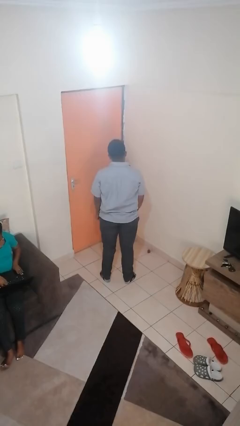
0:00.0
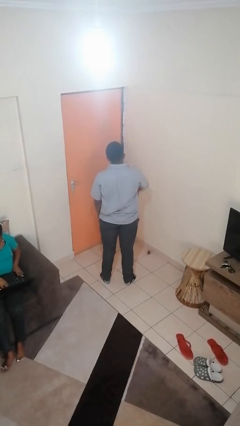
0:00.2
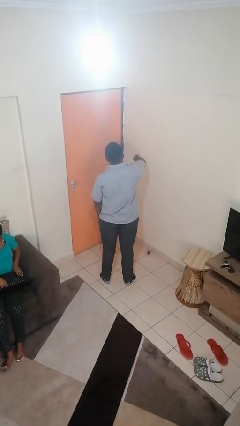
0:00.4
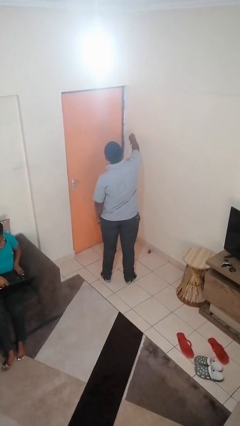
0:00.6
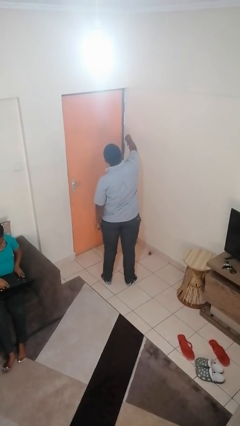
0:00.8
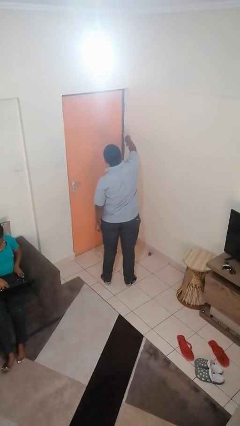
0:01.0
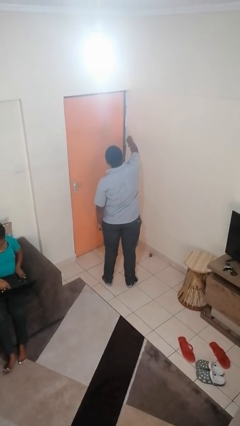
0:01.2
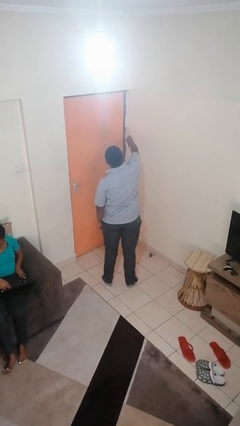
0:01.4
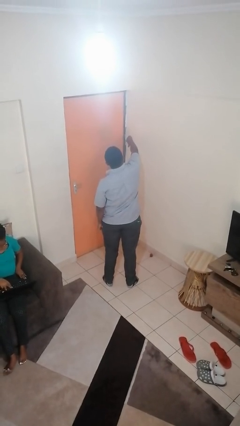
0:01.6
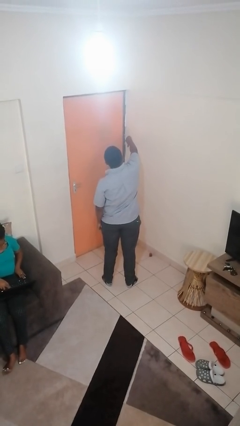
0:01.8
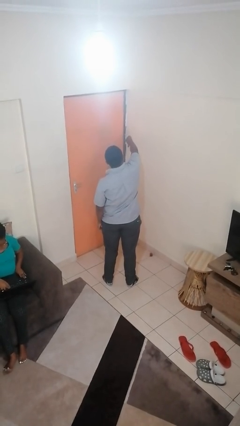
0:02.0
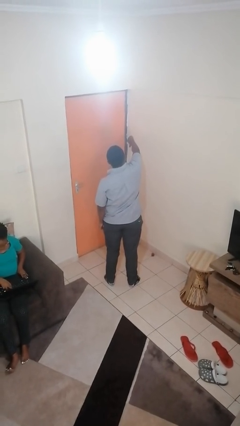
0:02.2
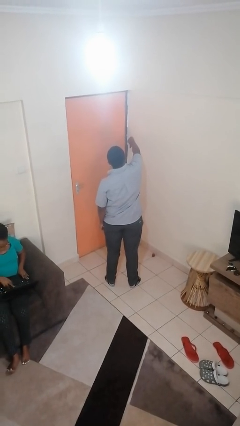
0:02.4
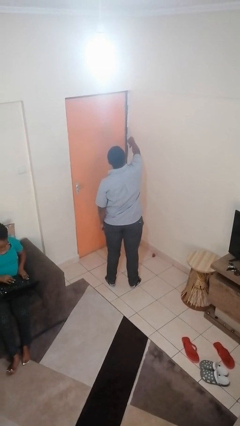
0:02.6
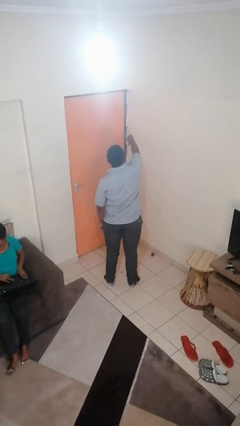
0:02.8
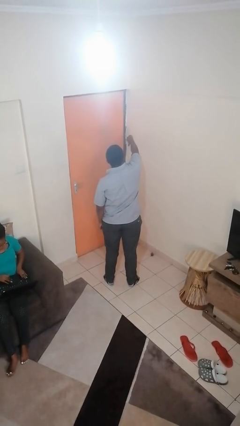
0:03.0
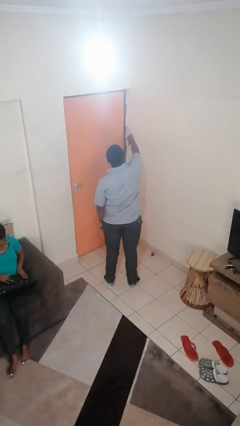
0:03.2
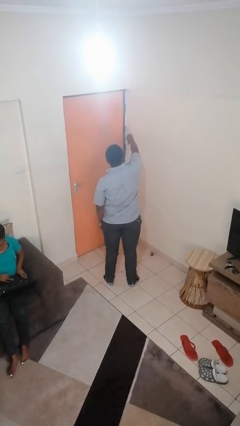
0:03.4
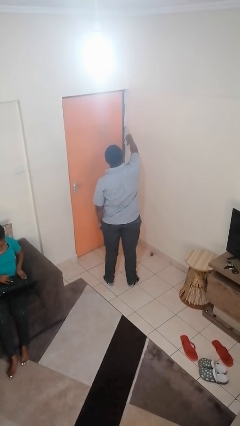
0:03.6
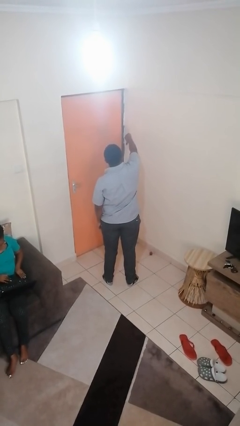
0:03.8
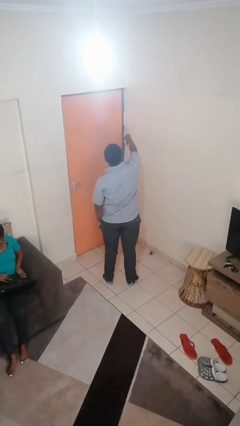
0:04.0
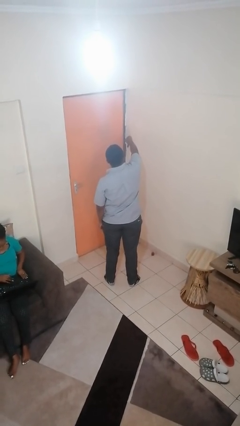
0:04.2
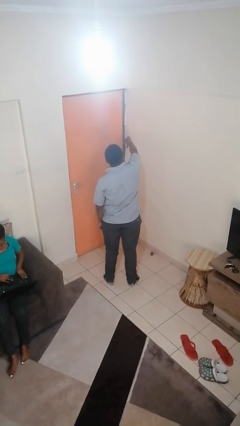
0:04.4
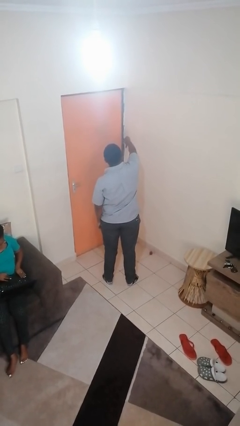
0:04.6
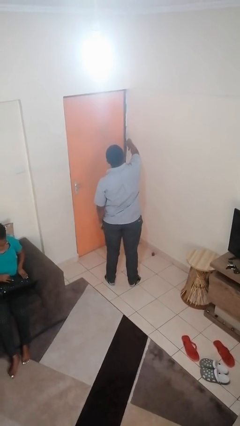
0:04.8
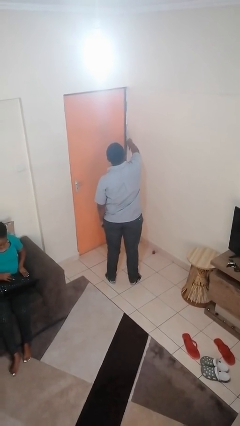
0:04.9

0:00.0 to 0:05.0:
person gestures thumbs down

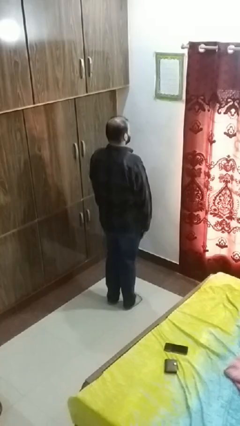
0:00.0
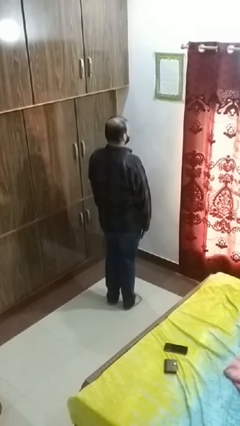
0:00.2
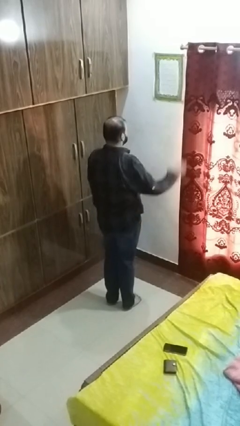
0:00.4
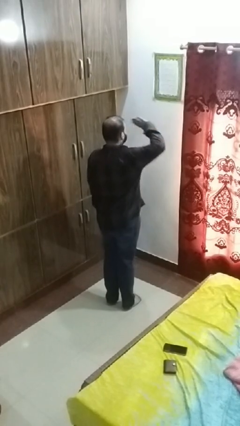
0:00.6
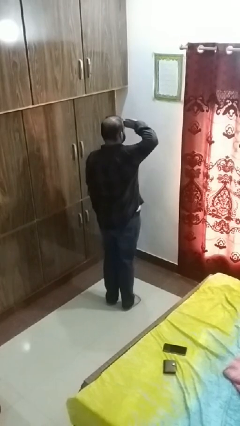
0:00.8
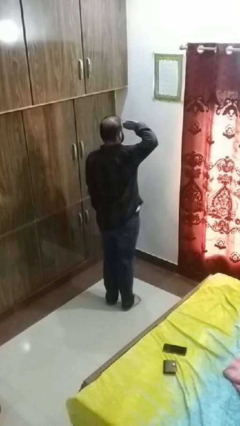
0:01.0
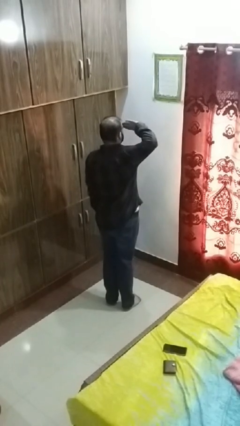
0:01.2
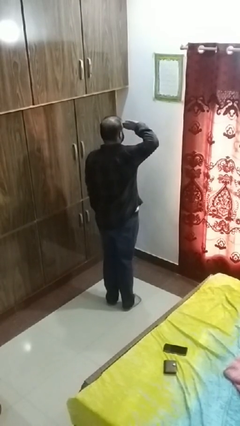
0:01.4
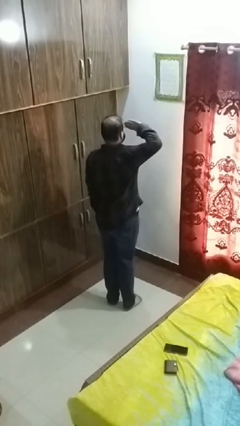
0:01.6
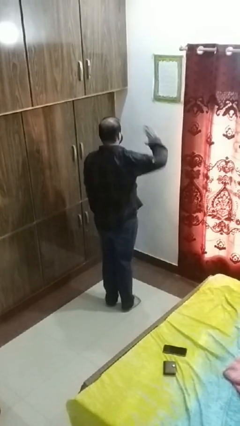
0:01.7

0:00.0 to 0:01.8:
person salutes

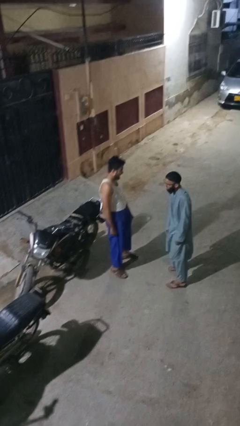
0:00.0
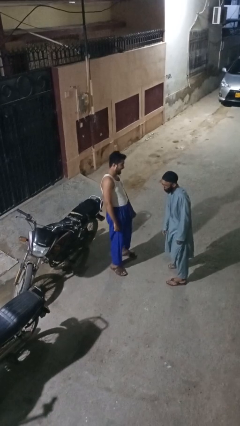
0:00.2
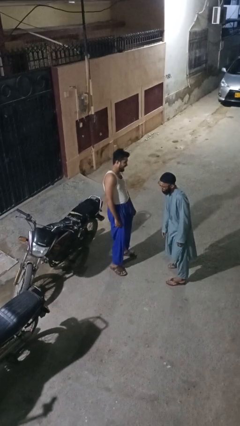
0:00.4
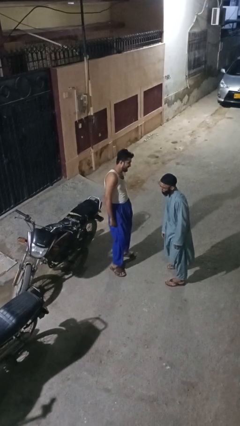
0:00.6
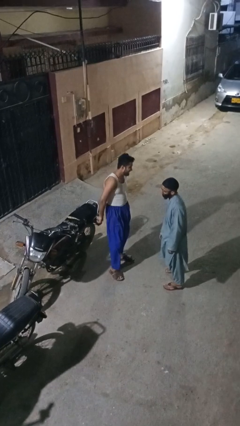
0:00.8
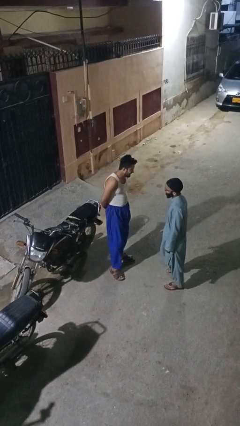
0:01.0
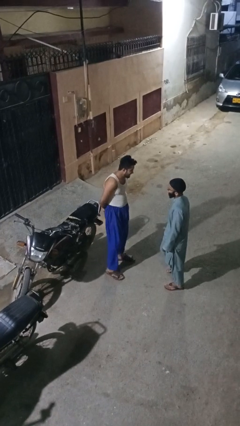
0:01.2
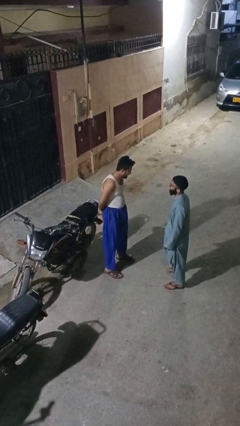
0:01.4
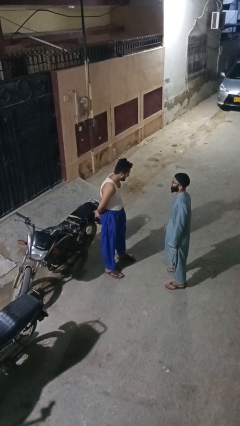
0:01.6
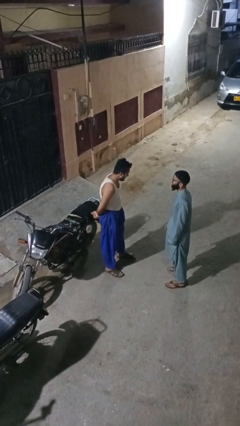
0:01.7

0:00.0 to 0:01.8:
person laughs with person

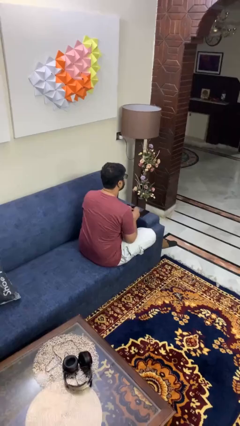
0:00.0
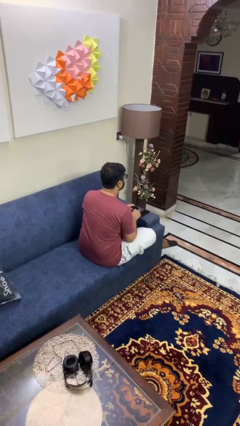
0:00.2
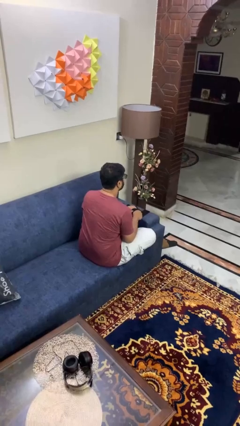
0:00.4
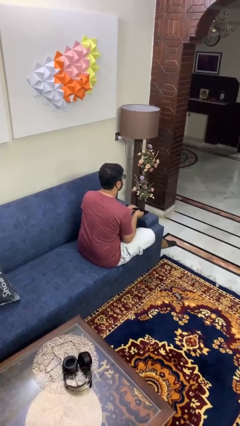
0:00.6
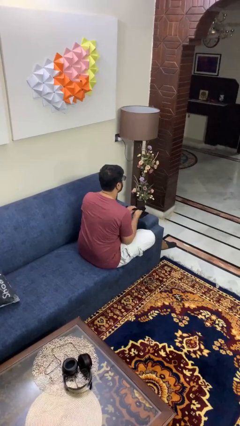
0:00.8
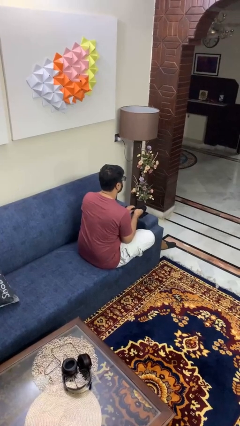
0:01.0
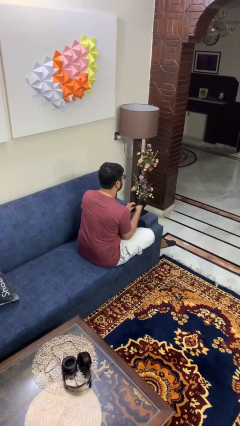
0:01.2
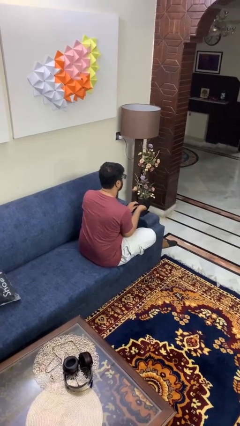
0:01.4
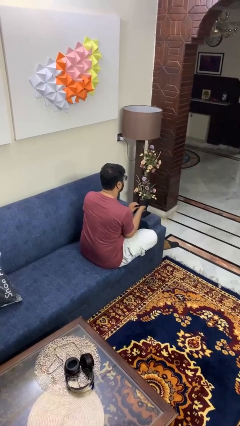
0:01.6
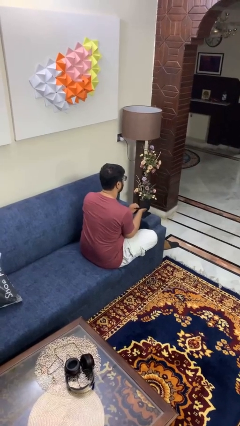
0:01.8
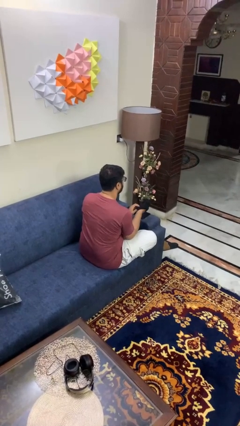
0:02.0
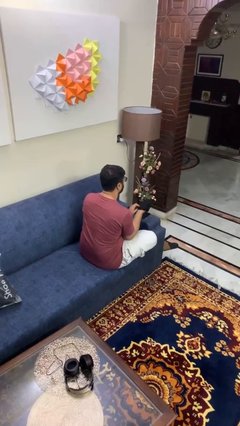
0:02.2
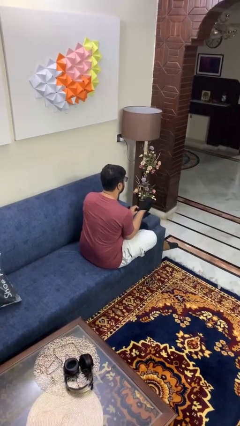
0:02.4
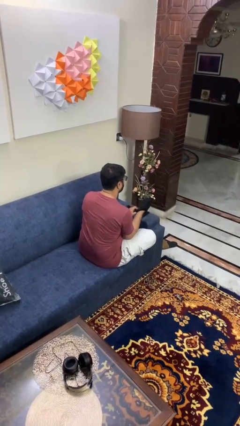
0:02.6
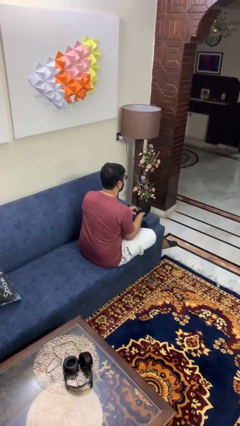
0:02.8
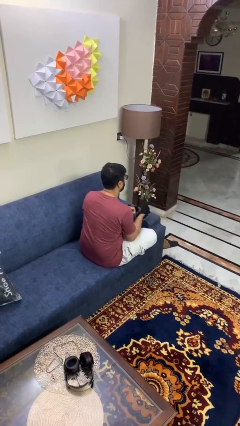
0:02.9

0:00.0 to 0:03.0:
person puts on gloves

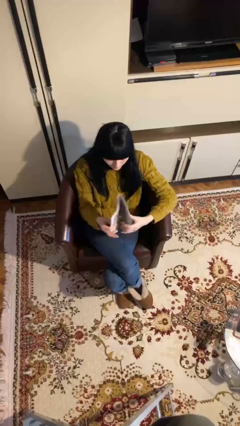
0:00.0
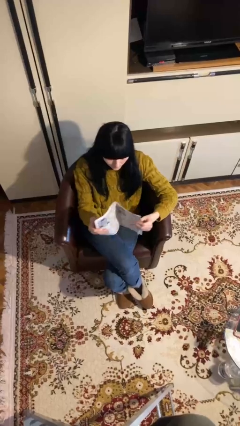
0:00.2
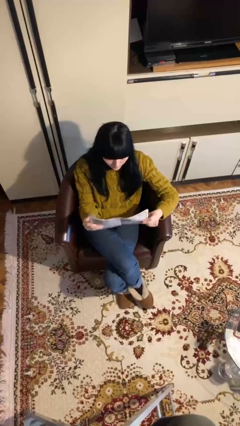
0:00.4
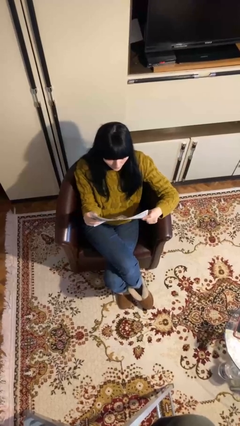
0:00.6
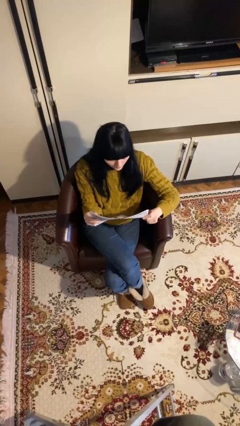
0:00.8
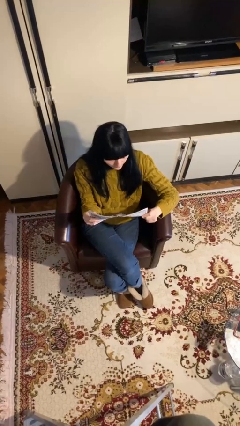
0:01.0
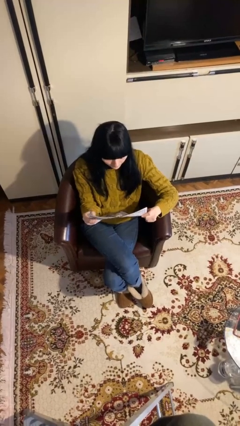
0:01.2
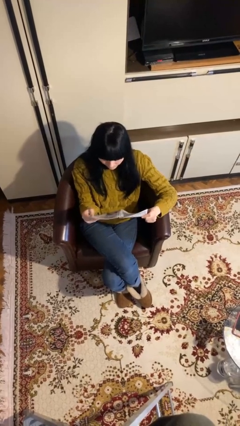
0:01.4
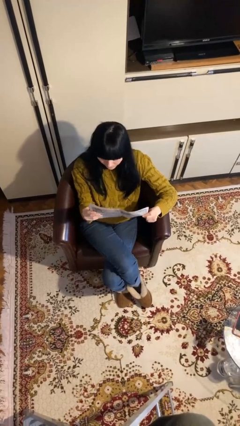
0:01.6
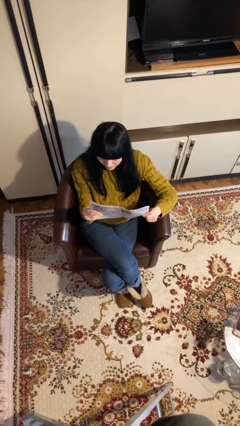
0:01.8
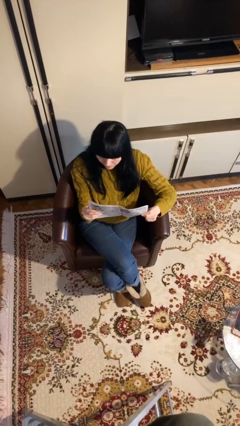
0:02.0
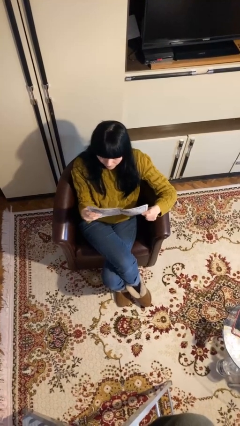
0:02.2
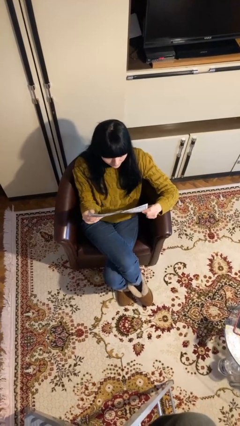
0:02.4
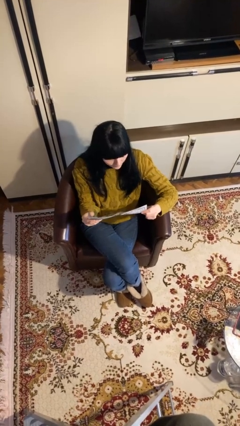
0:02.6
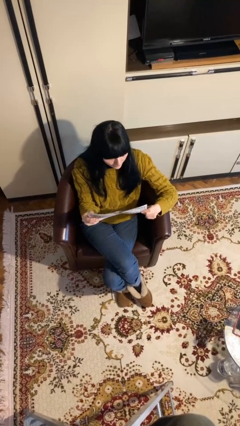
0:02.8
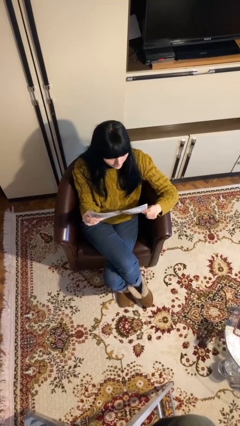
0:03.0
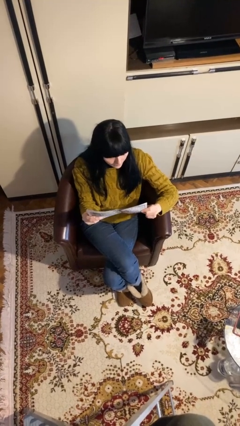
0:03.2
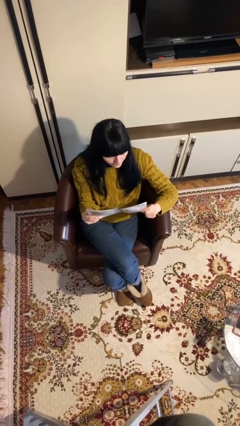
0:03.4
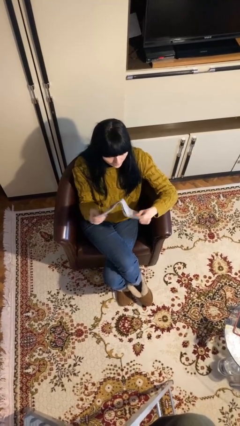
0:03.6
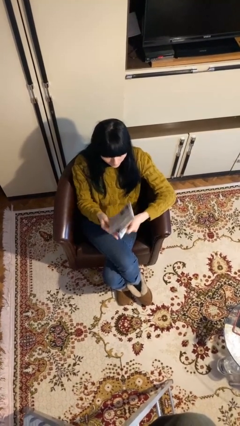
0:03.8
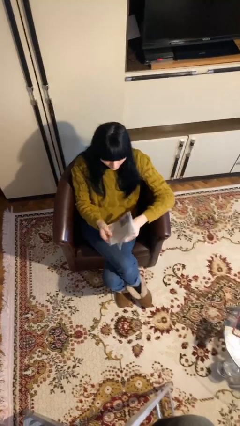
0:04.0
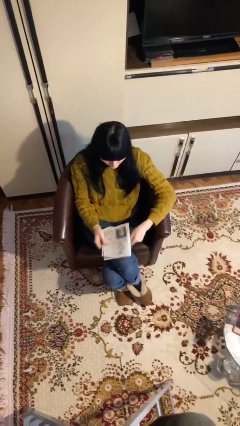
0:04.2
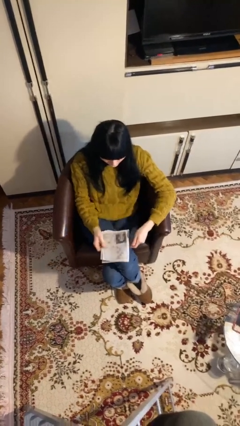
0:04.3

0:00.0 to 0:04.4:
person reads document

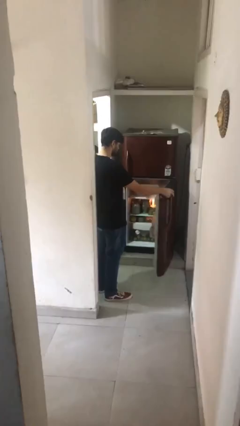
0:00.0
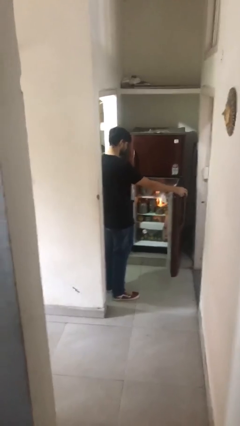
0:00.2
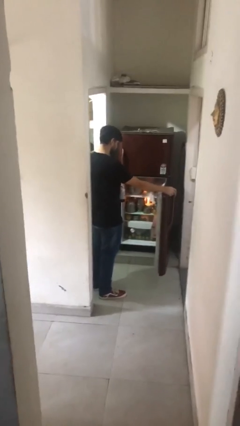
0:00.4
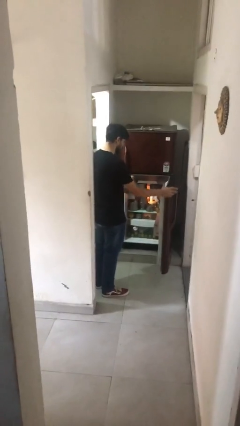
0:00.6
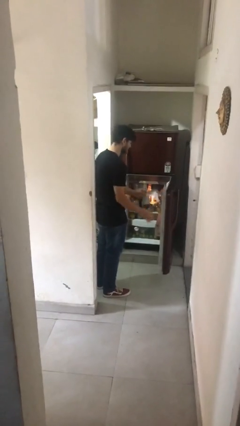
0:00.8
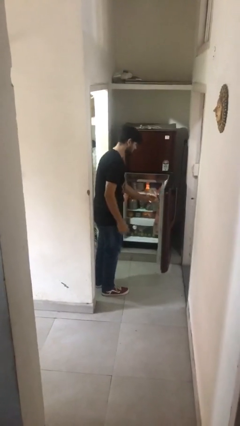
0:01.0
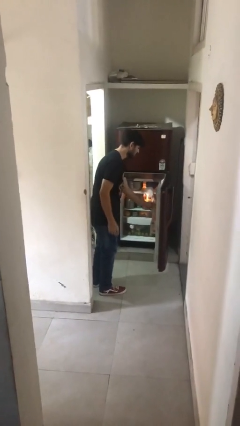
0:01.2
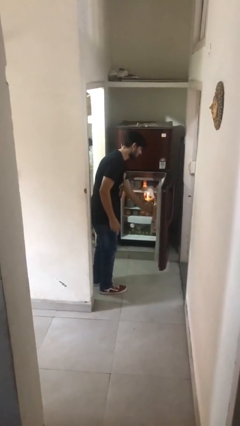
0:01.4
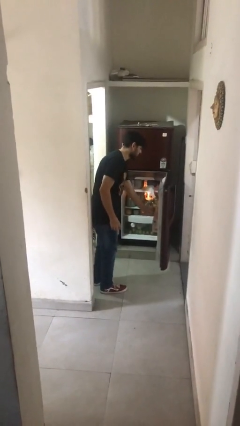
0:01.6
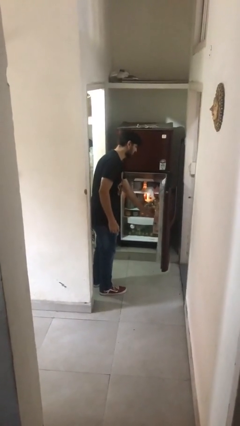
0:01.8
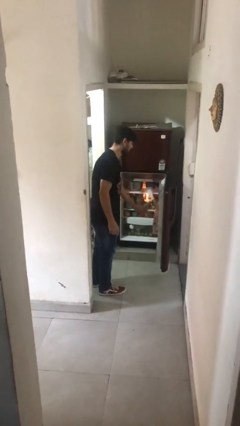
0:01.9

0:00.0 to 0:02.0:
person puts object into refrigerator
